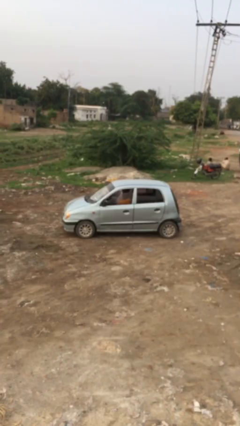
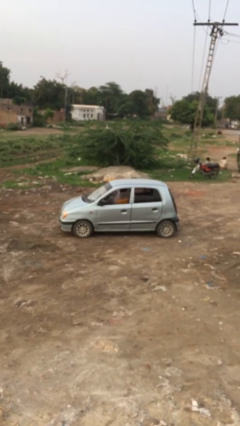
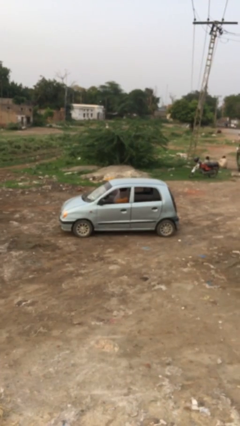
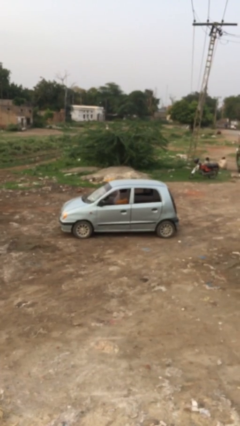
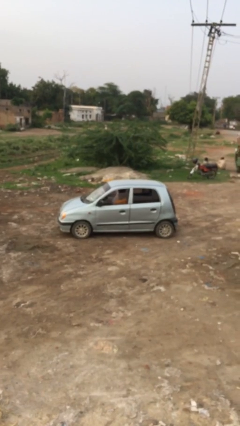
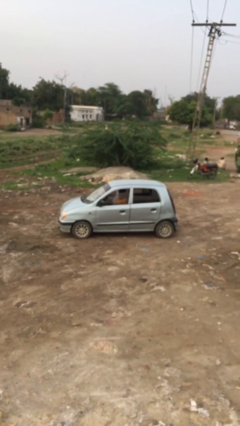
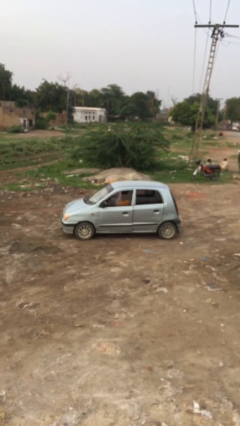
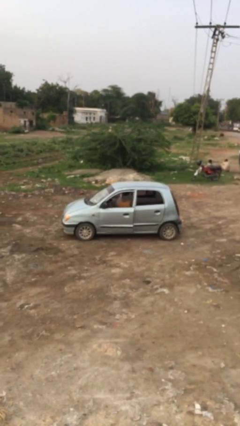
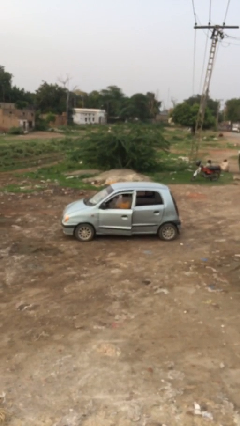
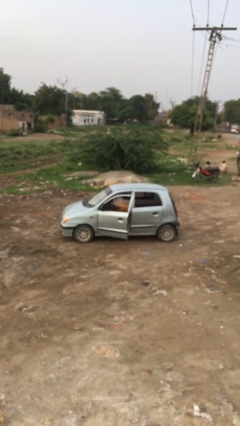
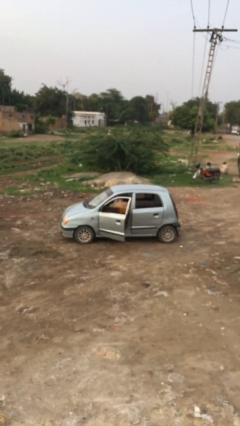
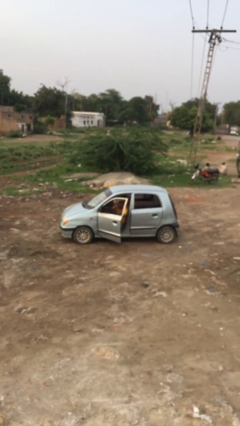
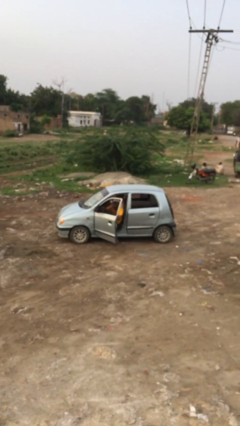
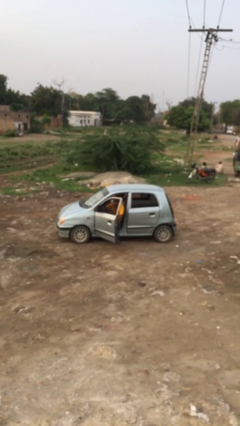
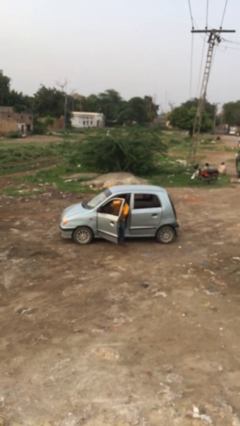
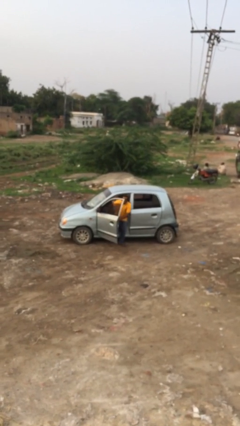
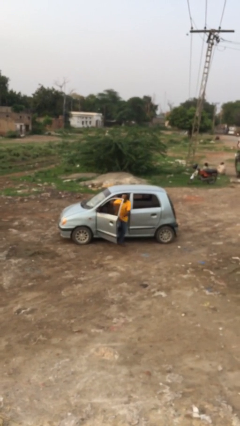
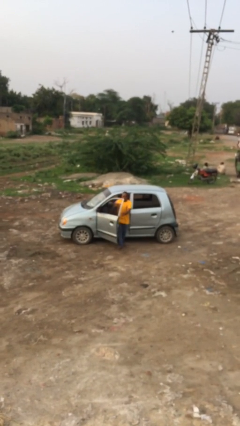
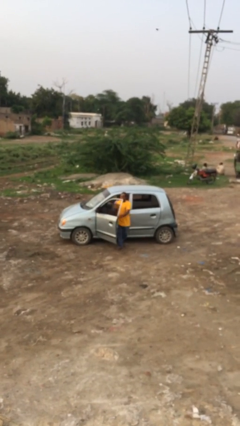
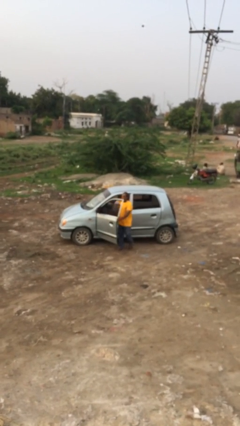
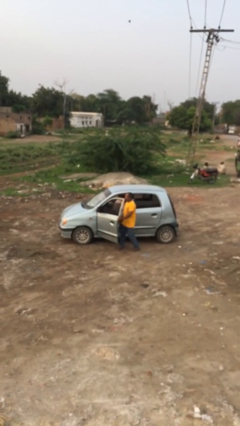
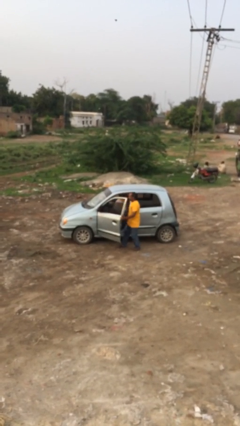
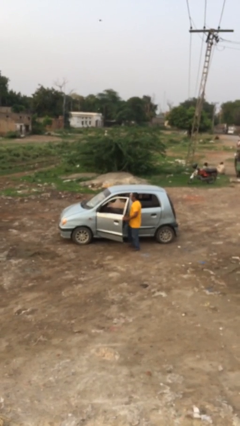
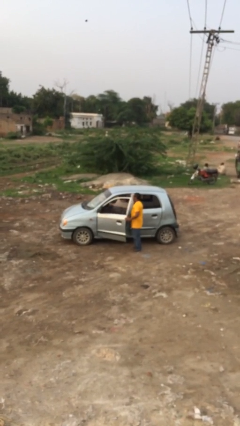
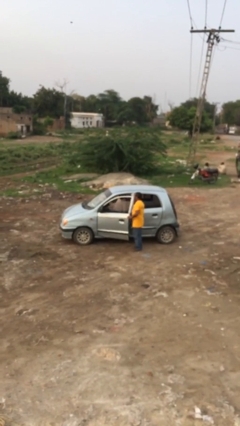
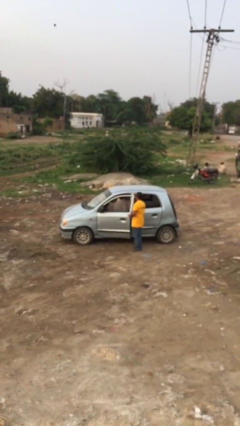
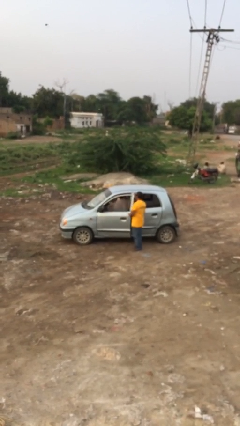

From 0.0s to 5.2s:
car drops off person

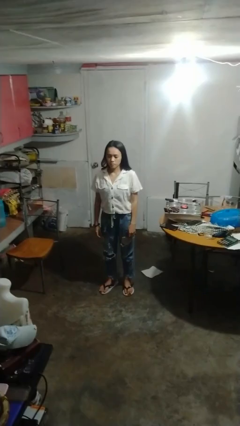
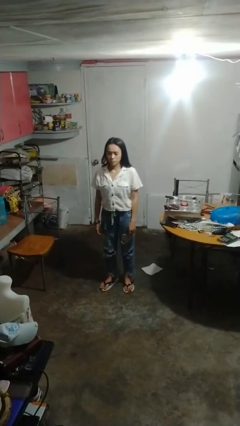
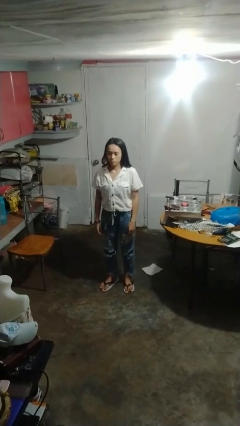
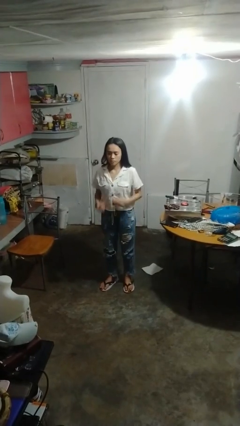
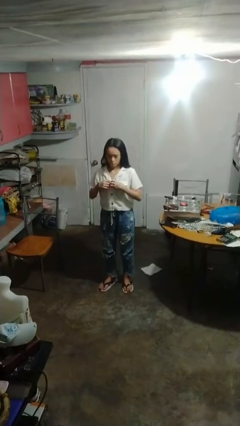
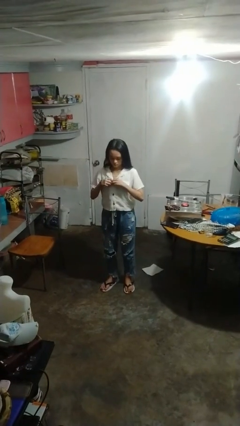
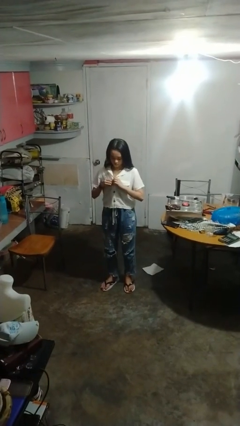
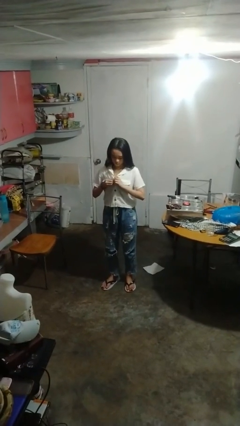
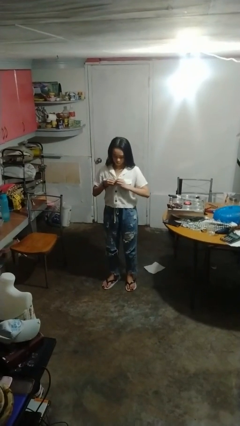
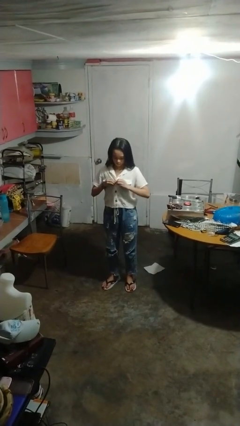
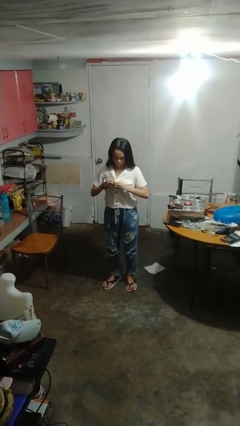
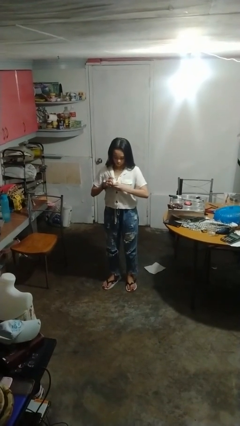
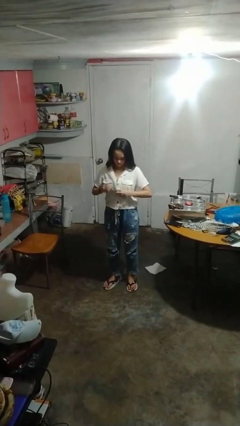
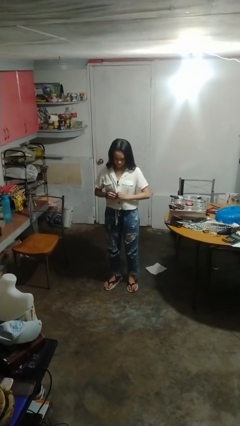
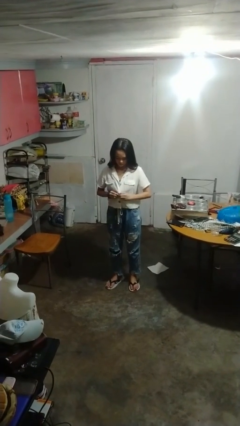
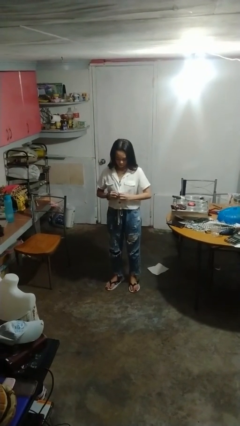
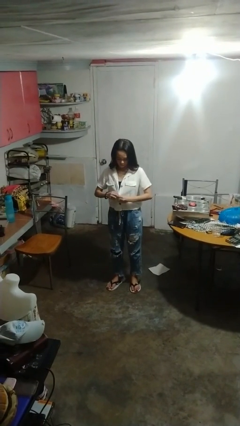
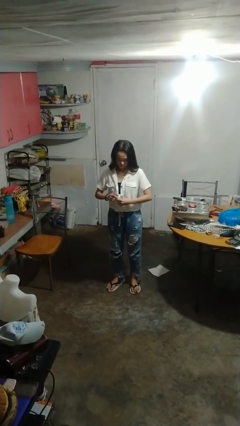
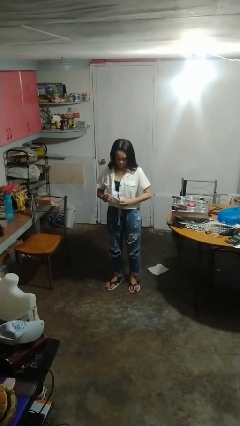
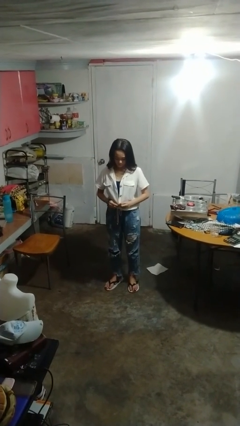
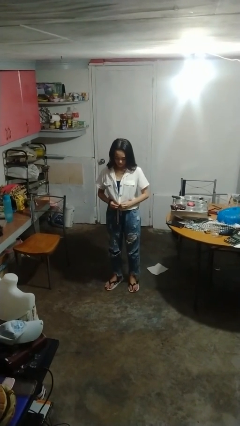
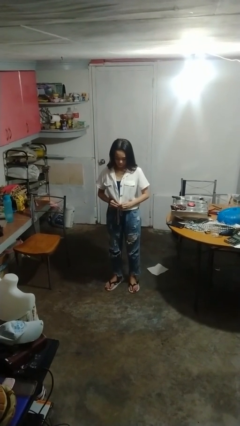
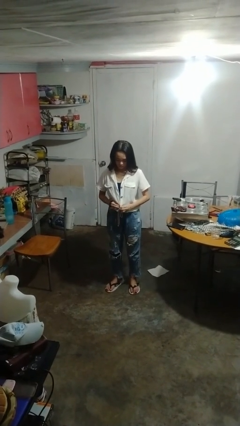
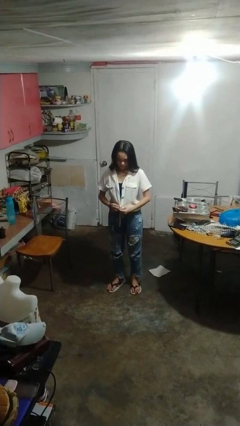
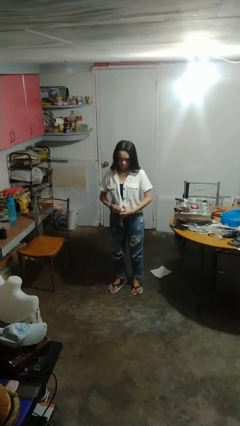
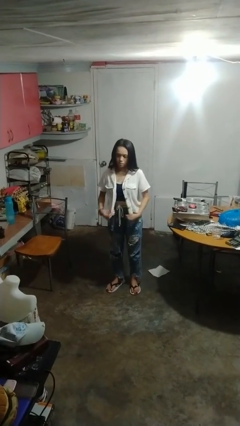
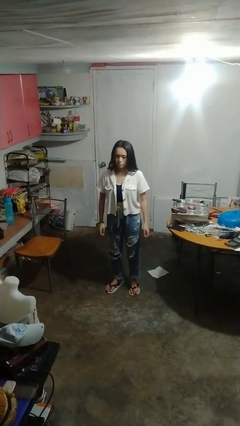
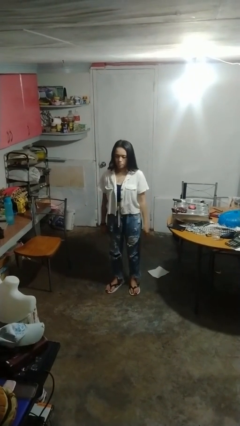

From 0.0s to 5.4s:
person unbuttons shirt

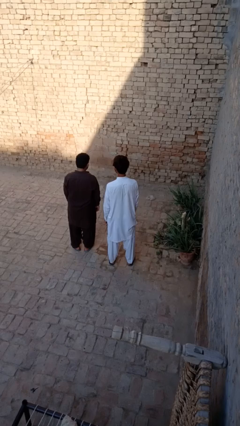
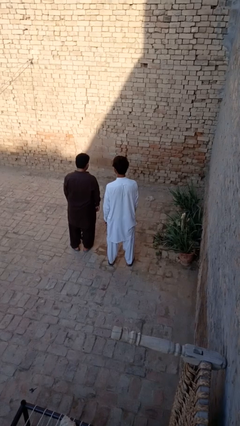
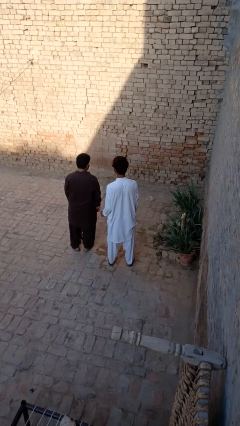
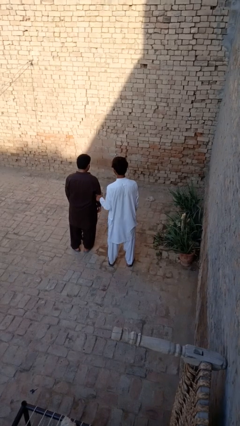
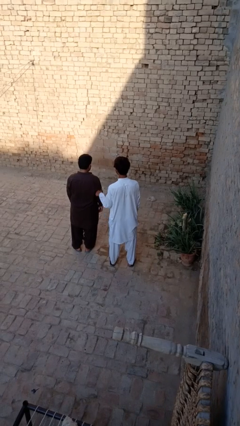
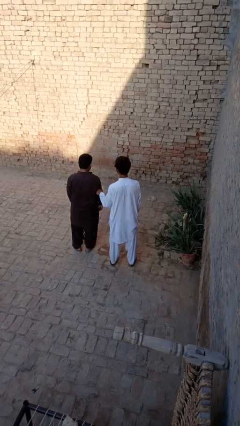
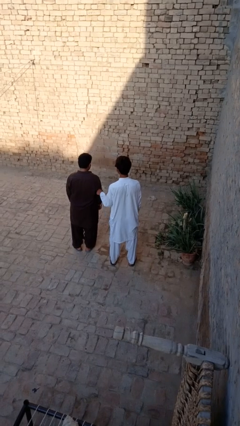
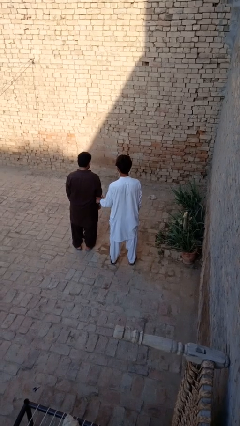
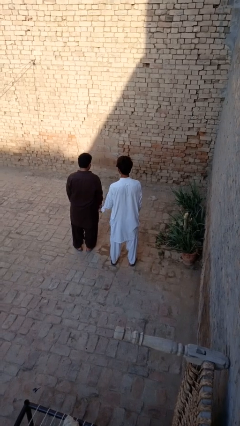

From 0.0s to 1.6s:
person tickles person

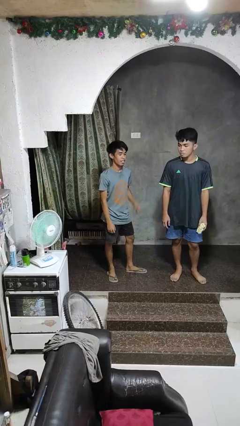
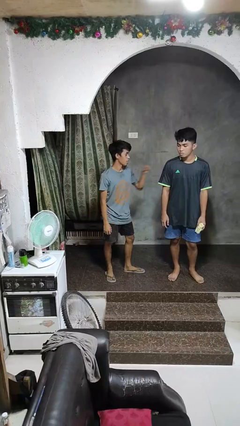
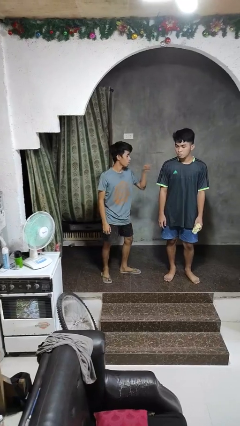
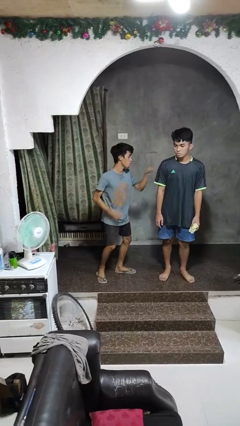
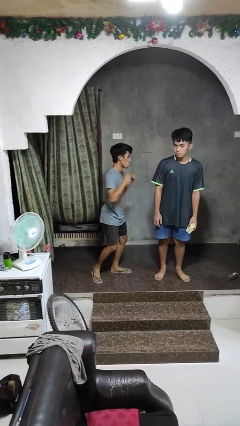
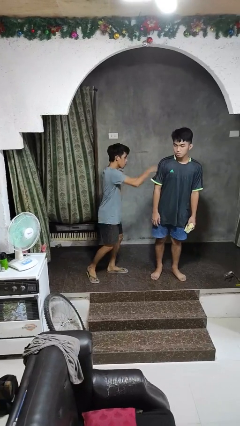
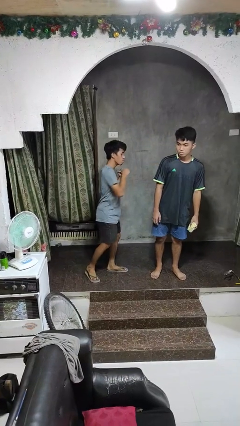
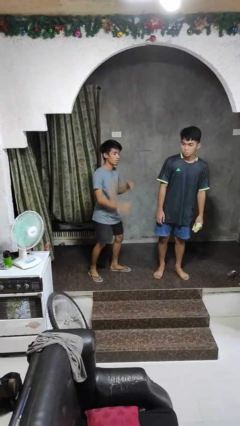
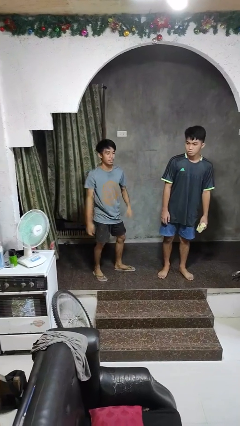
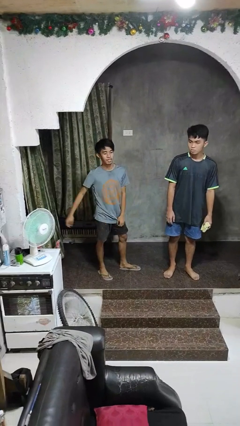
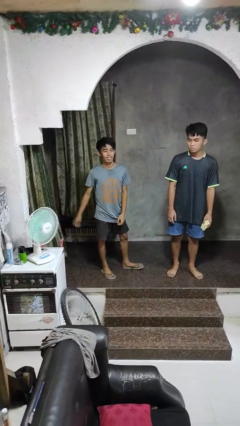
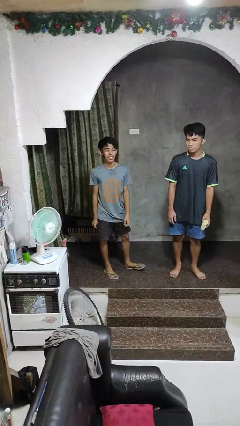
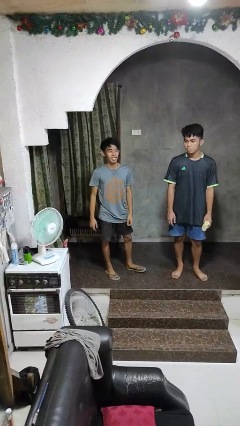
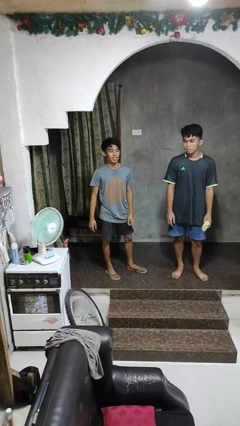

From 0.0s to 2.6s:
person pounds shoulders of person

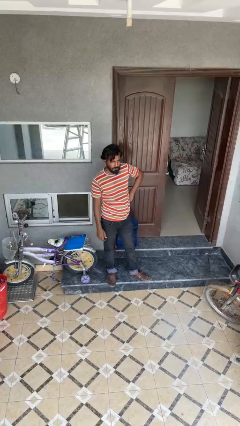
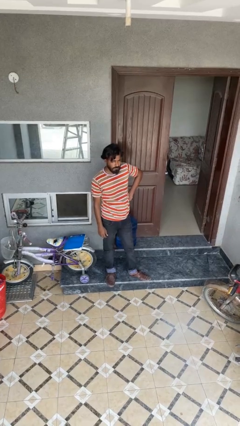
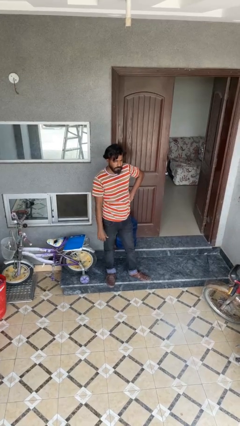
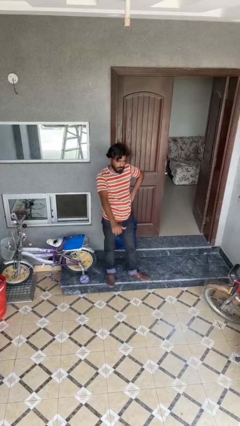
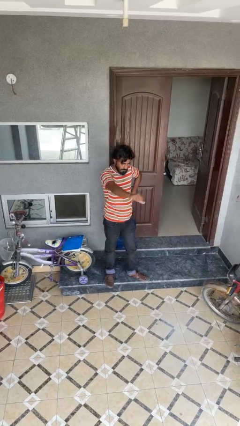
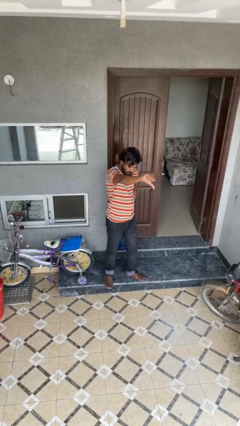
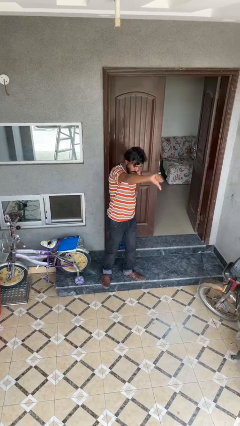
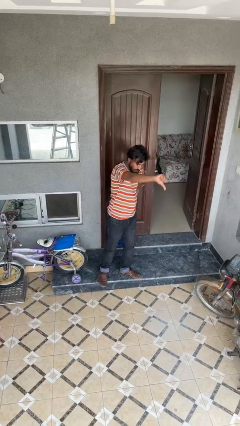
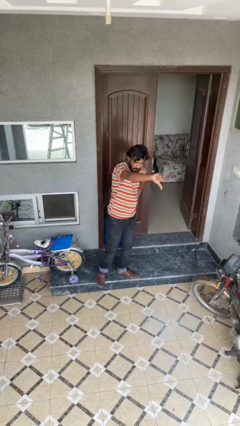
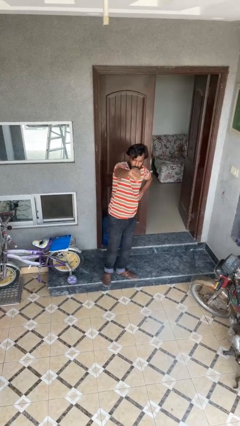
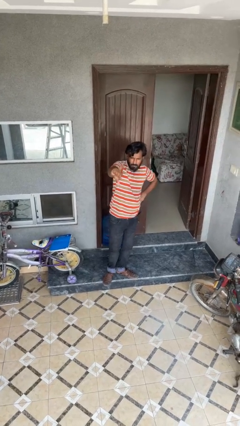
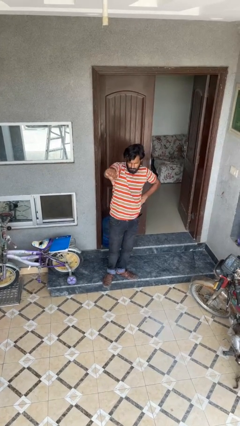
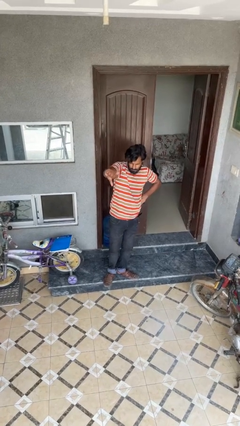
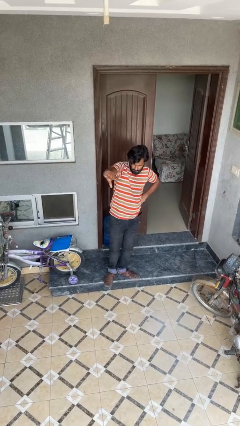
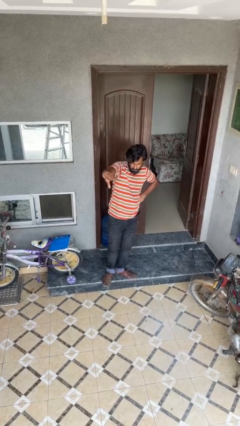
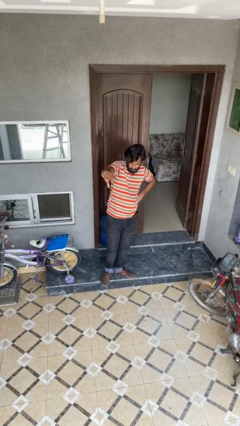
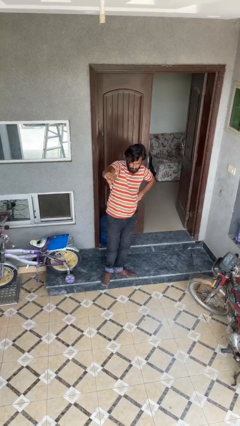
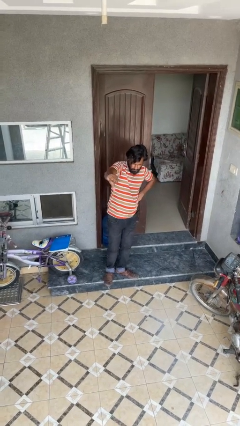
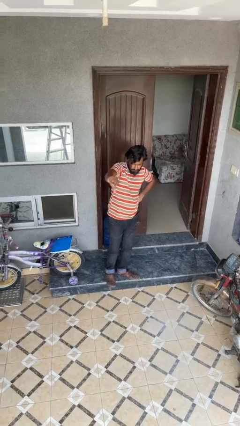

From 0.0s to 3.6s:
person gestures thumbs down
